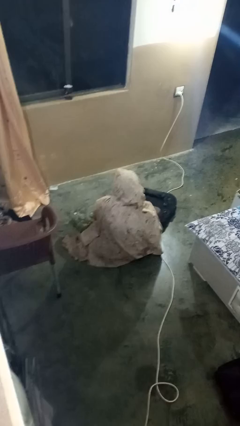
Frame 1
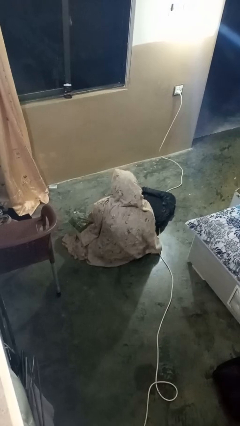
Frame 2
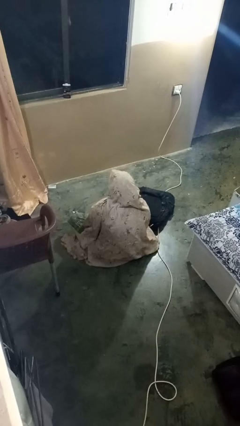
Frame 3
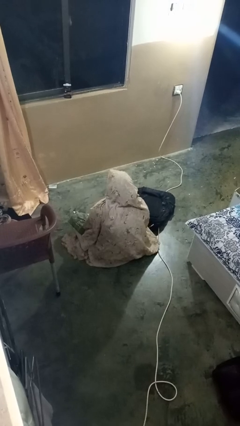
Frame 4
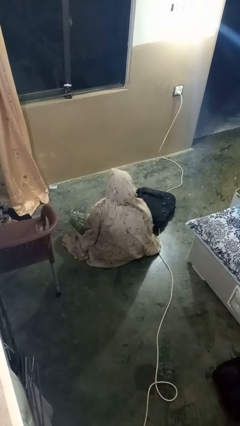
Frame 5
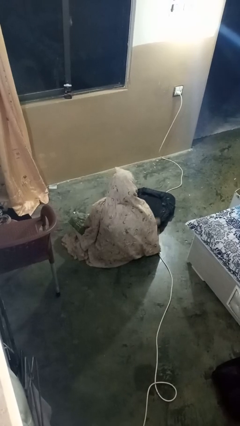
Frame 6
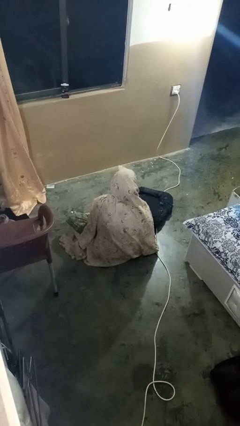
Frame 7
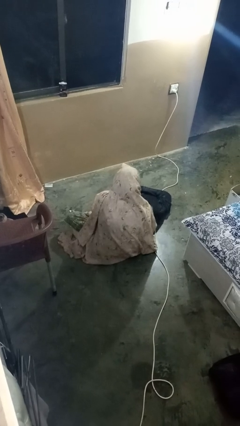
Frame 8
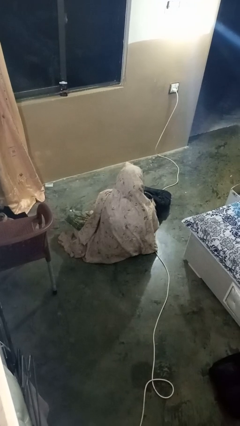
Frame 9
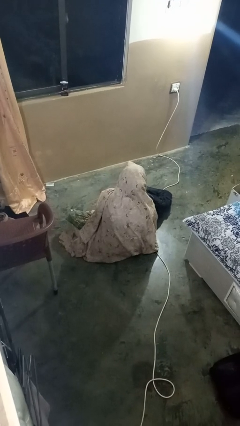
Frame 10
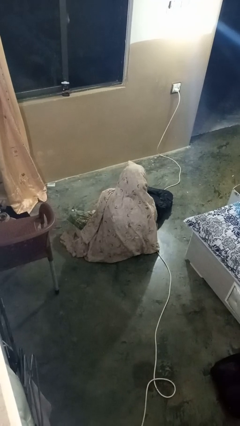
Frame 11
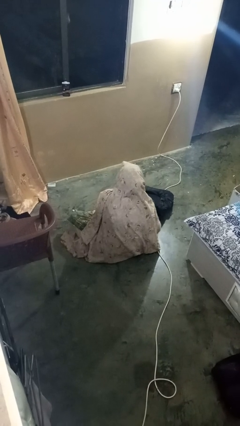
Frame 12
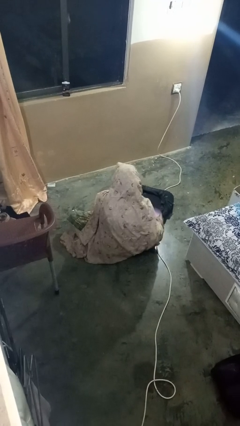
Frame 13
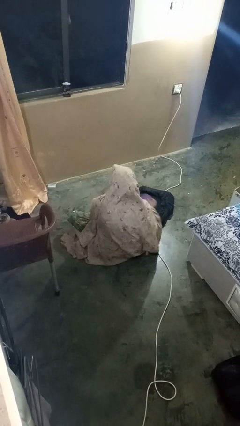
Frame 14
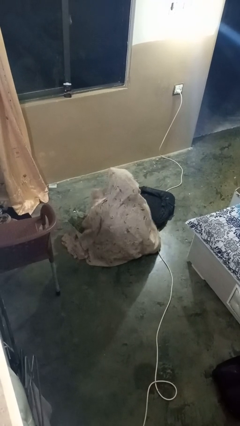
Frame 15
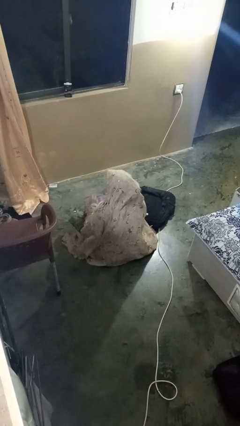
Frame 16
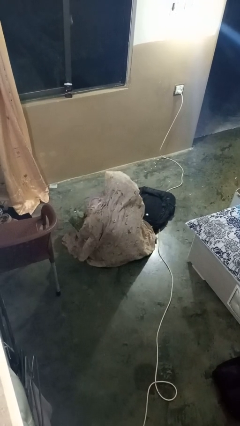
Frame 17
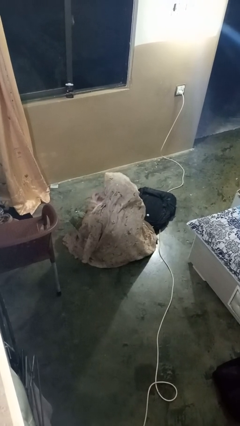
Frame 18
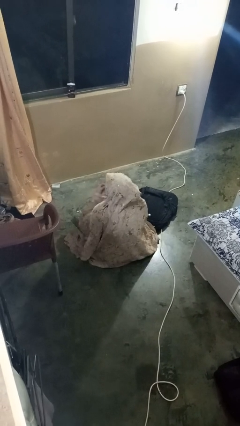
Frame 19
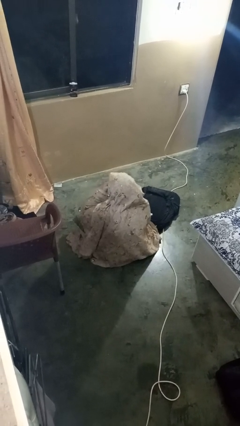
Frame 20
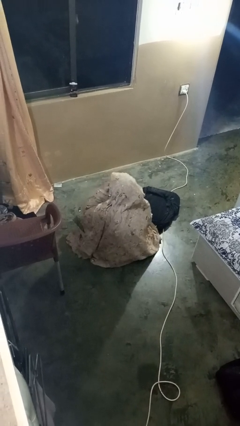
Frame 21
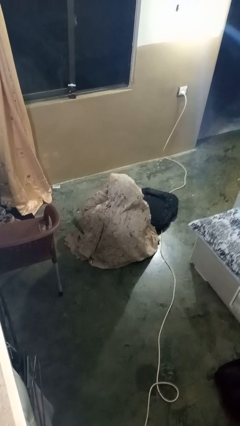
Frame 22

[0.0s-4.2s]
person eats snack from bag

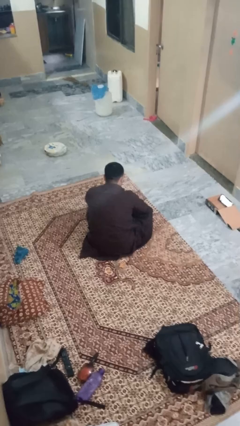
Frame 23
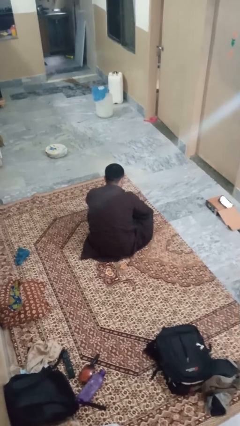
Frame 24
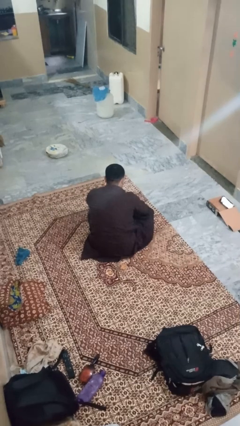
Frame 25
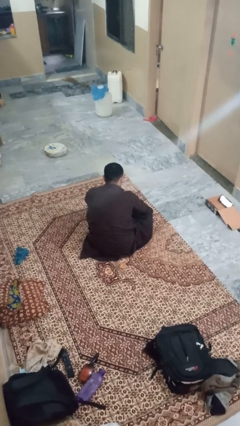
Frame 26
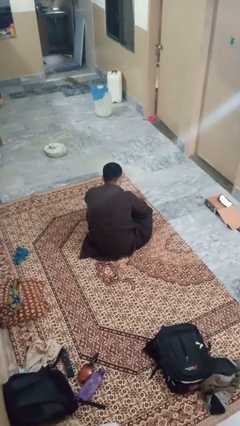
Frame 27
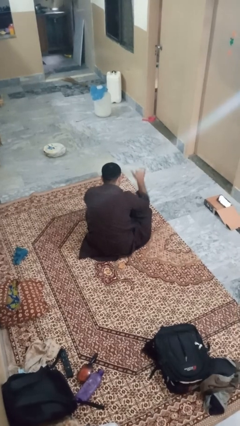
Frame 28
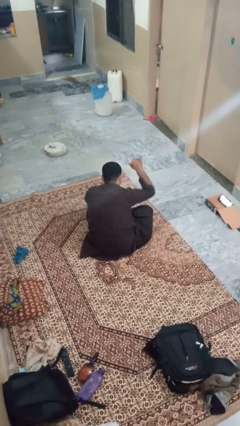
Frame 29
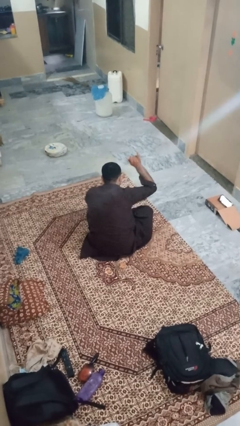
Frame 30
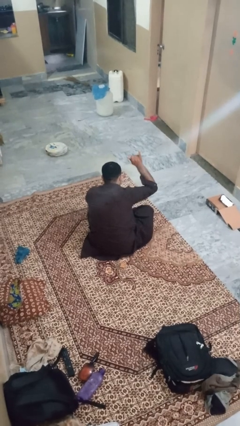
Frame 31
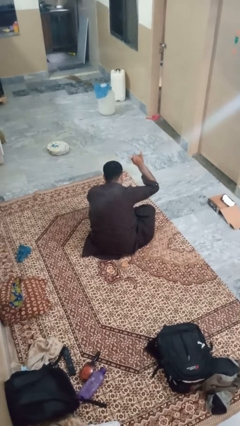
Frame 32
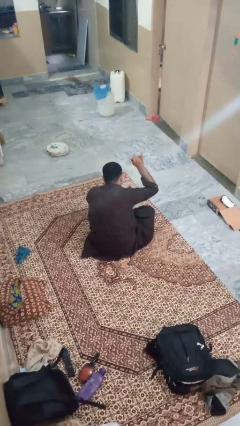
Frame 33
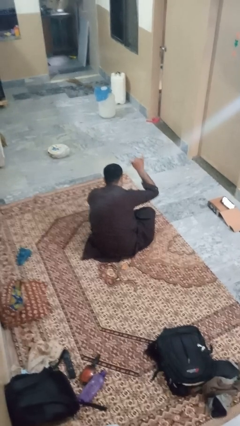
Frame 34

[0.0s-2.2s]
person gestures hang loose

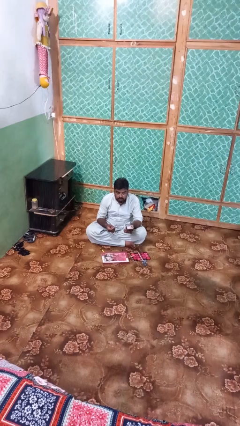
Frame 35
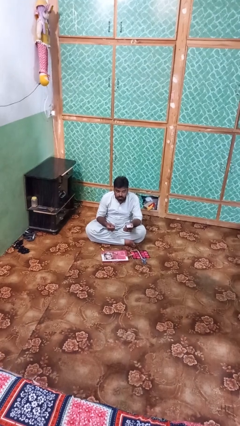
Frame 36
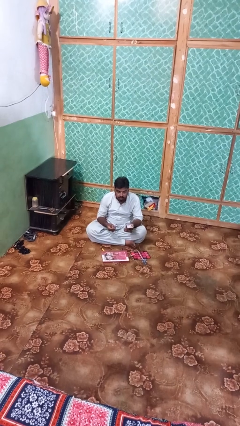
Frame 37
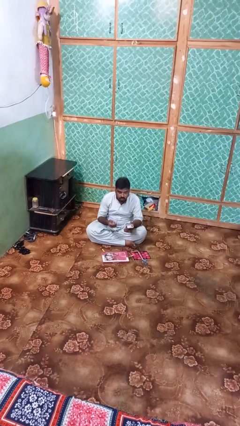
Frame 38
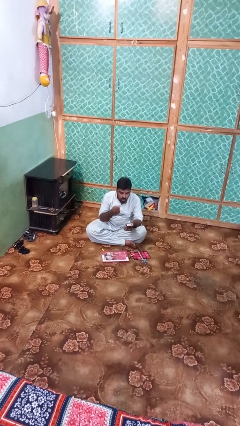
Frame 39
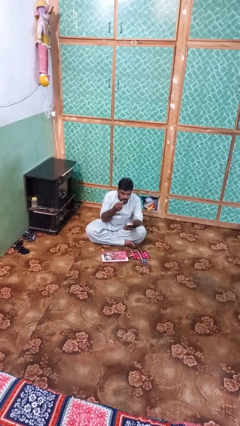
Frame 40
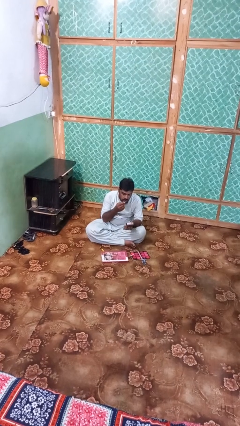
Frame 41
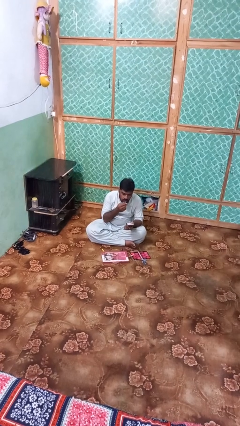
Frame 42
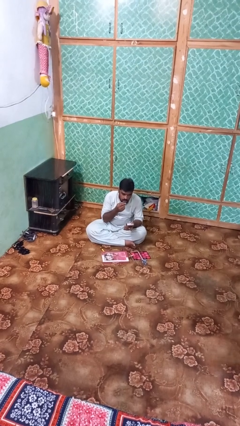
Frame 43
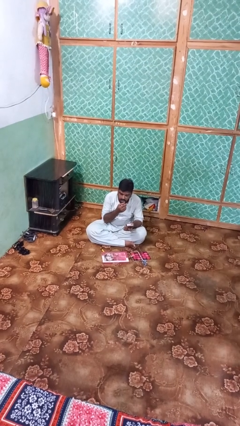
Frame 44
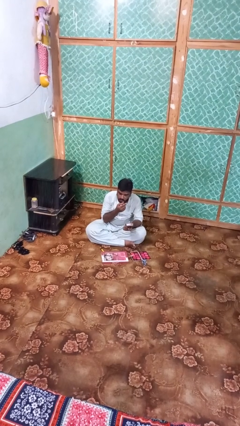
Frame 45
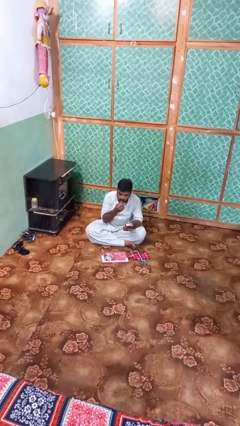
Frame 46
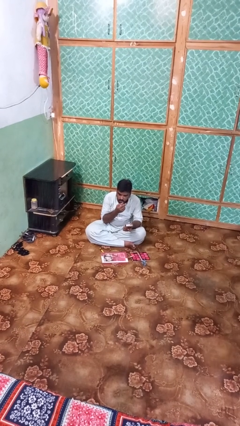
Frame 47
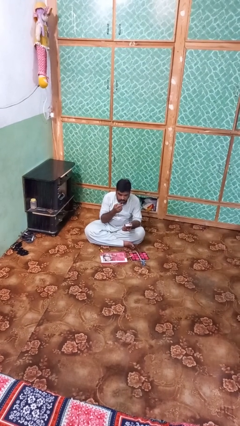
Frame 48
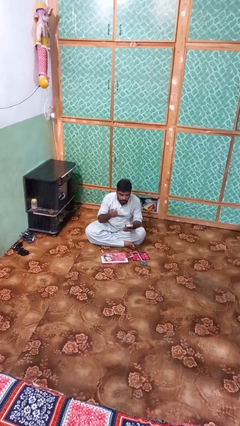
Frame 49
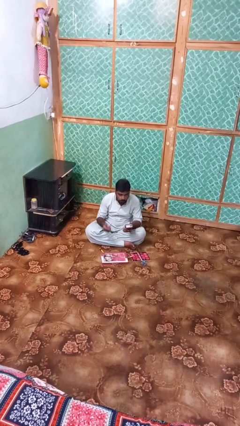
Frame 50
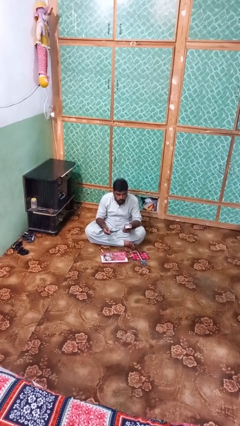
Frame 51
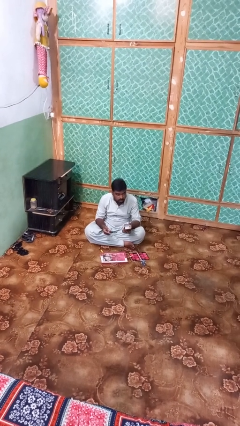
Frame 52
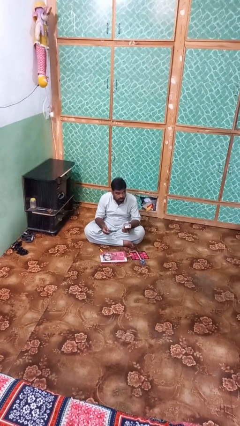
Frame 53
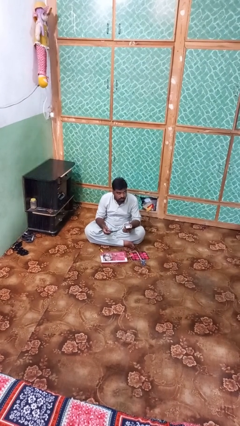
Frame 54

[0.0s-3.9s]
person applies lip makeup

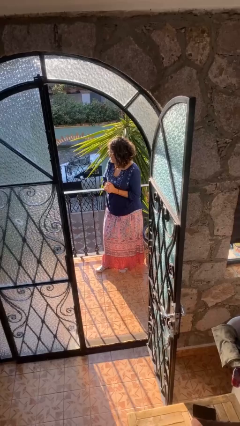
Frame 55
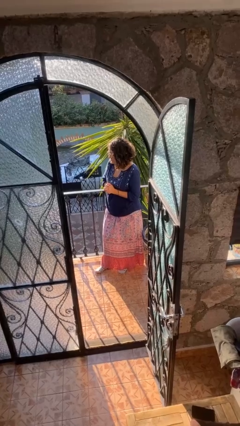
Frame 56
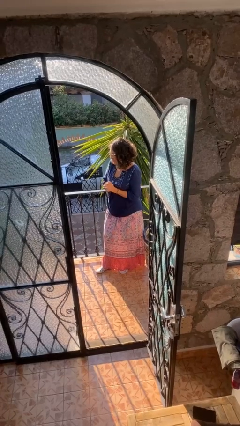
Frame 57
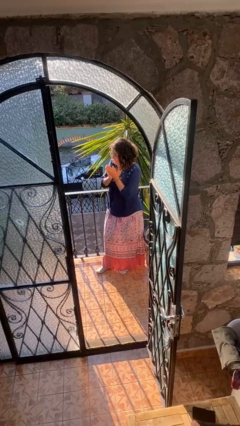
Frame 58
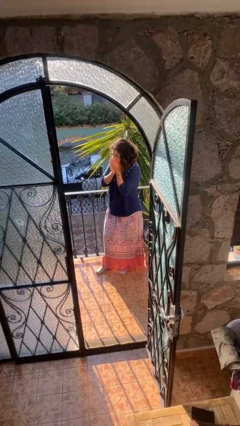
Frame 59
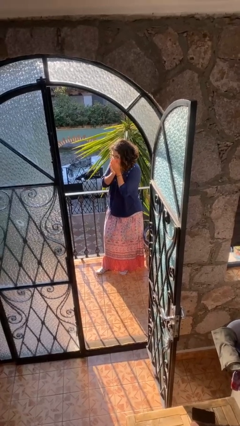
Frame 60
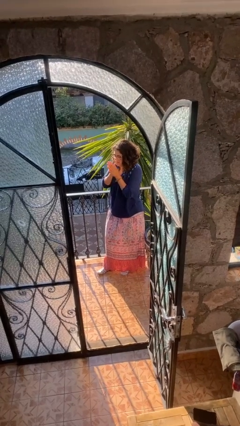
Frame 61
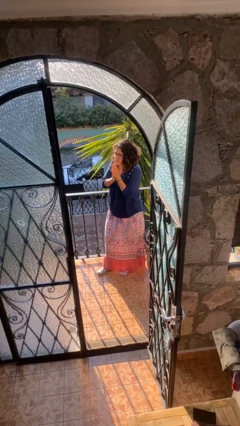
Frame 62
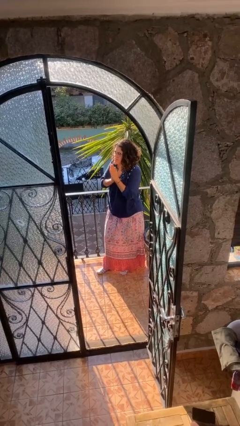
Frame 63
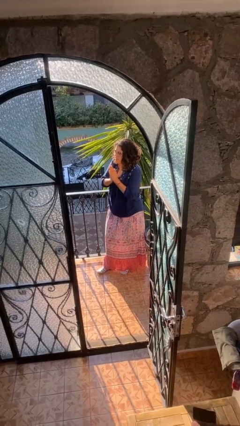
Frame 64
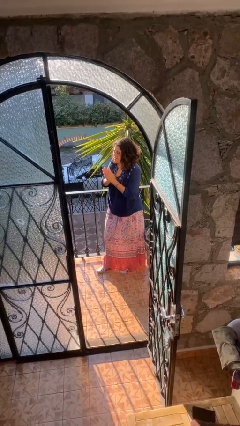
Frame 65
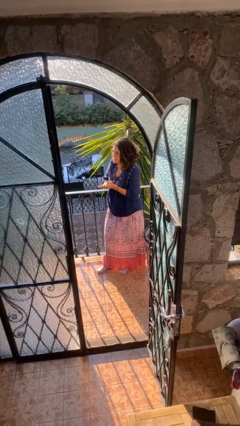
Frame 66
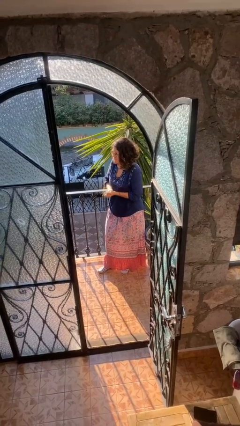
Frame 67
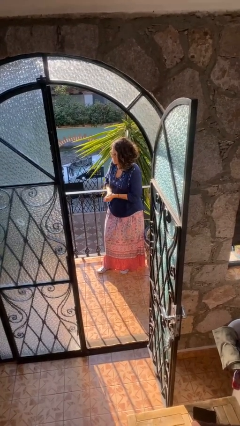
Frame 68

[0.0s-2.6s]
person blows into hands

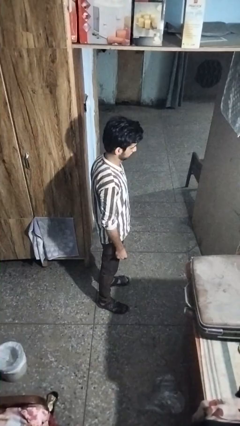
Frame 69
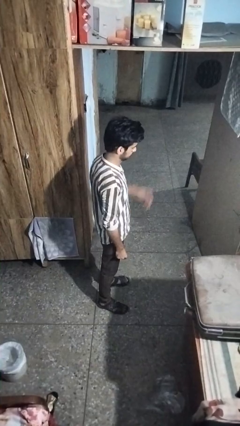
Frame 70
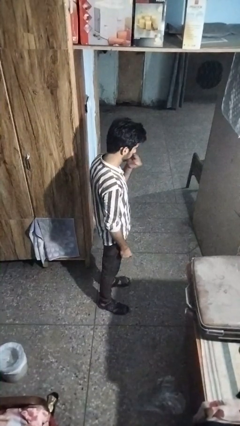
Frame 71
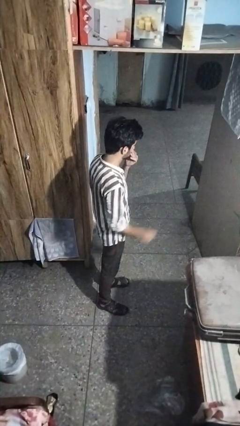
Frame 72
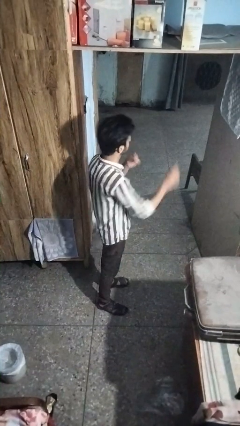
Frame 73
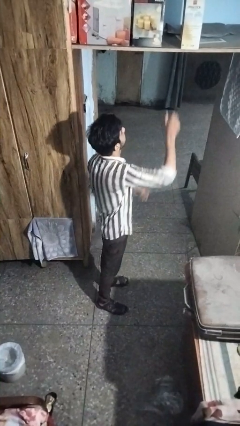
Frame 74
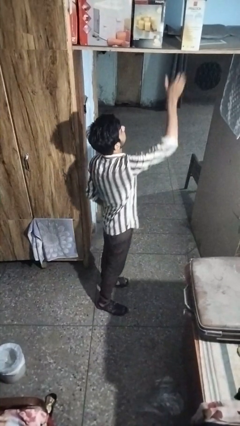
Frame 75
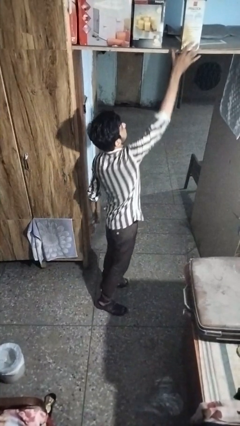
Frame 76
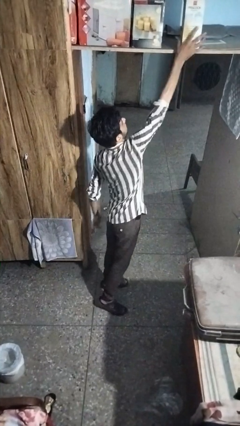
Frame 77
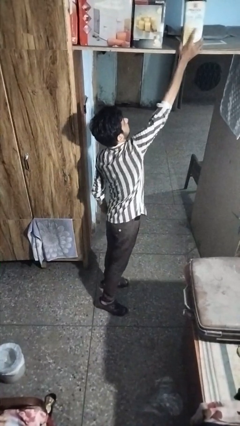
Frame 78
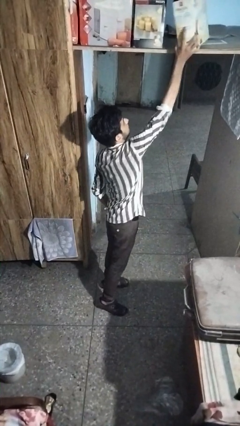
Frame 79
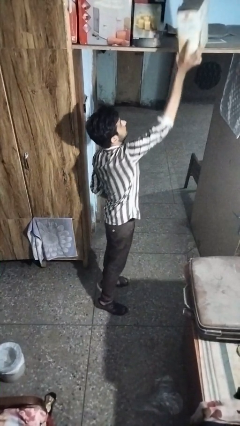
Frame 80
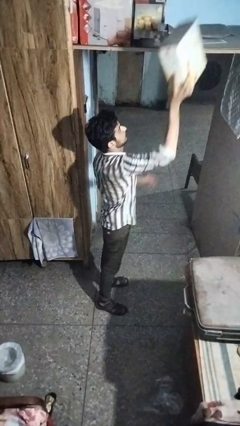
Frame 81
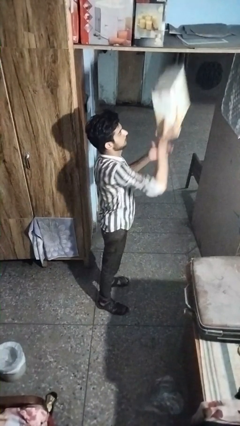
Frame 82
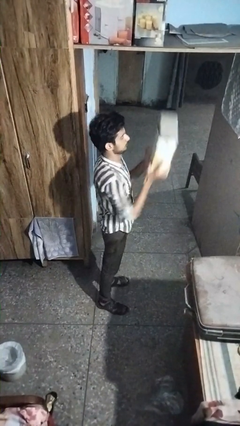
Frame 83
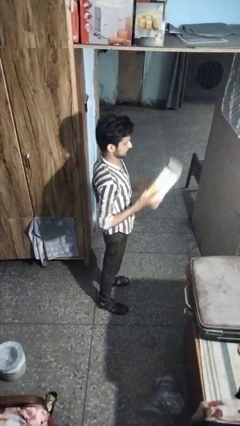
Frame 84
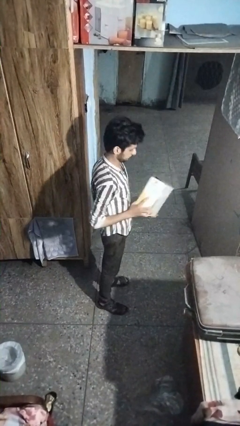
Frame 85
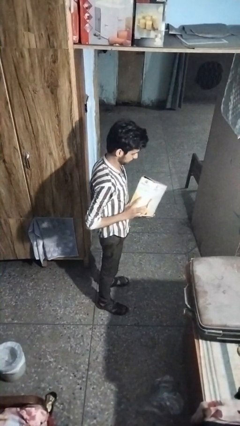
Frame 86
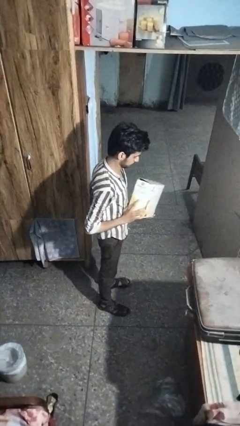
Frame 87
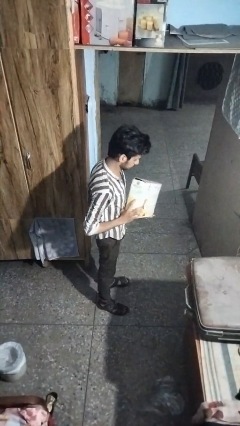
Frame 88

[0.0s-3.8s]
person picks up object from shelf

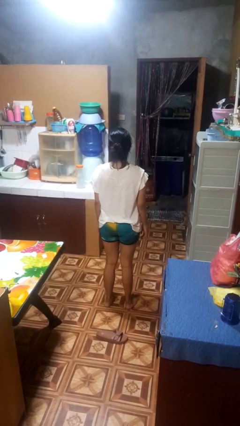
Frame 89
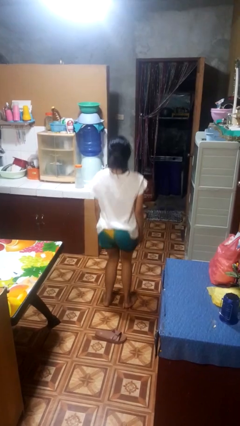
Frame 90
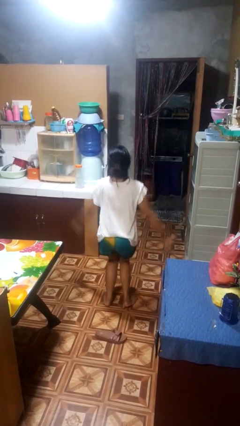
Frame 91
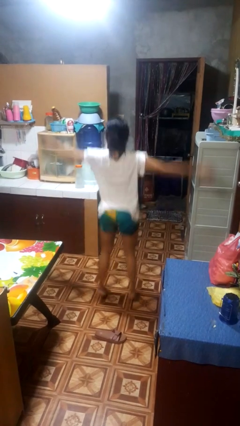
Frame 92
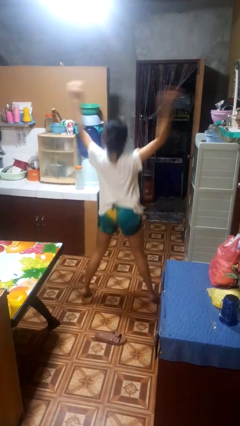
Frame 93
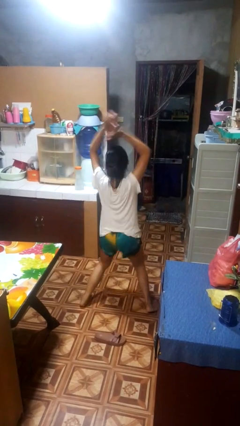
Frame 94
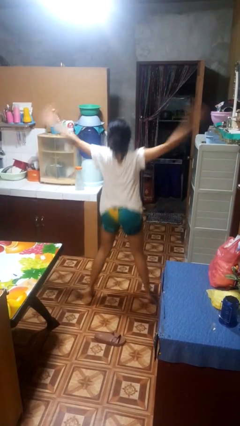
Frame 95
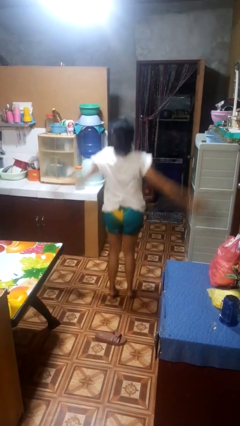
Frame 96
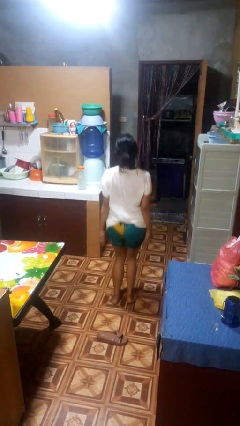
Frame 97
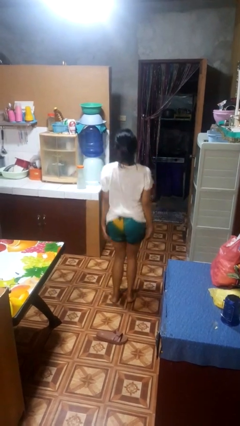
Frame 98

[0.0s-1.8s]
person exercises with jumping jacks
